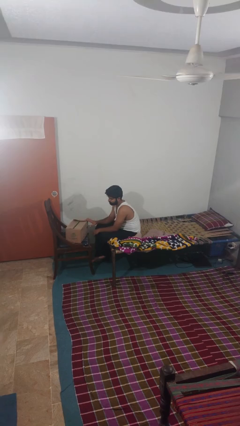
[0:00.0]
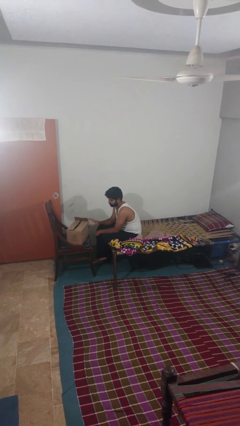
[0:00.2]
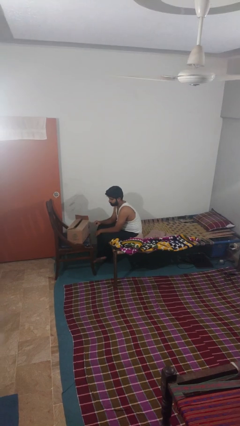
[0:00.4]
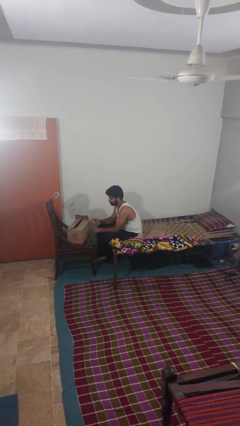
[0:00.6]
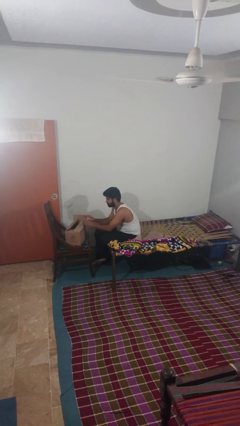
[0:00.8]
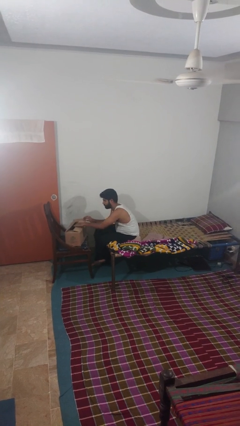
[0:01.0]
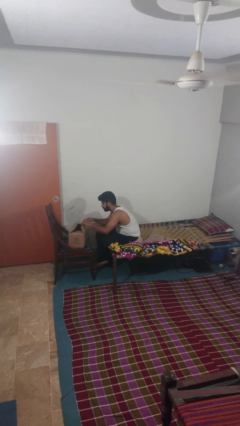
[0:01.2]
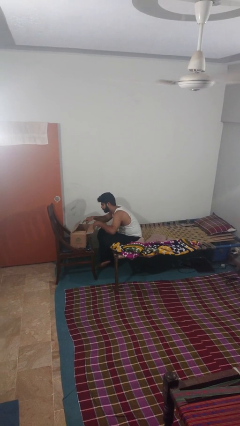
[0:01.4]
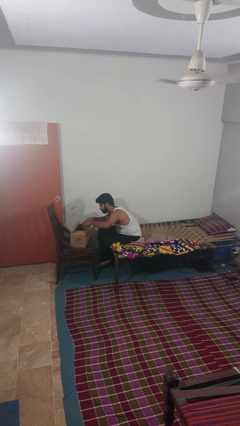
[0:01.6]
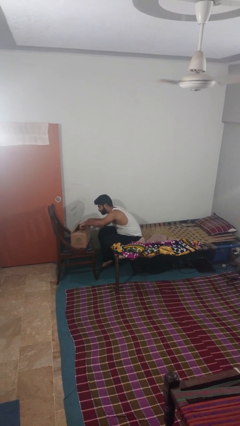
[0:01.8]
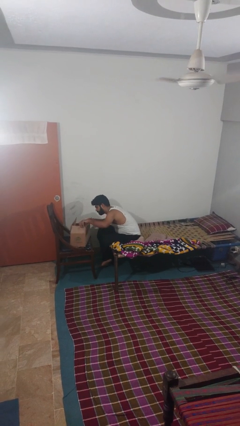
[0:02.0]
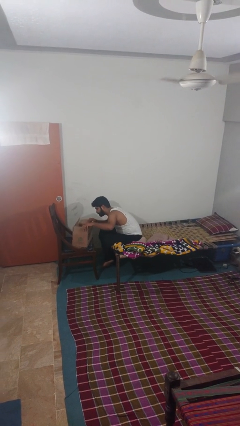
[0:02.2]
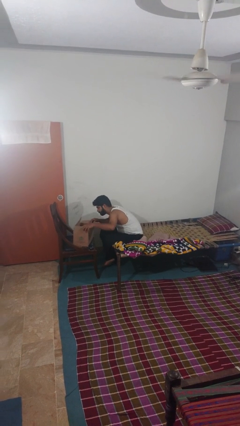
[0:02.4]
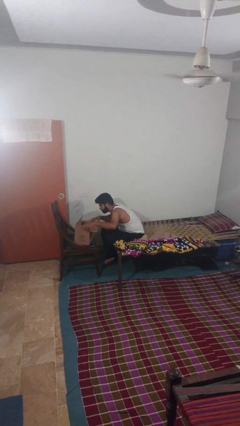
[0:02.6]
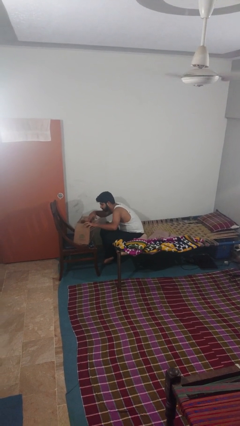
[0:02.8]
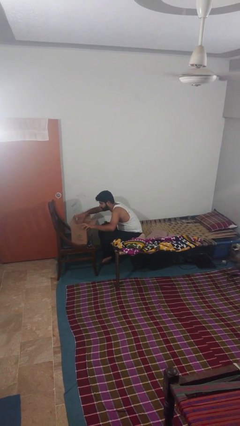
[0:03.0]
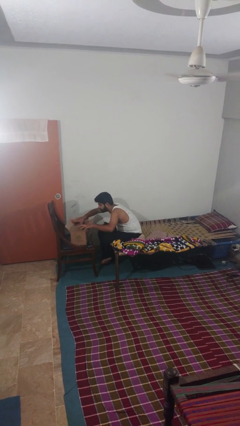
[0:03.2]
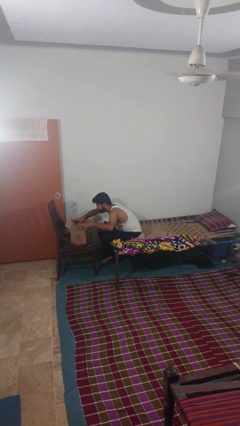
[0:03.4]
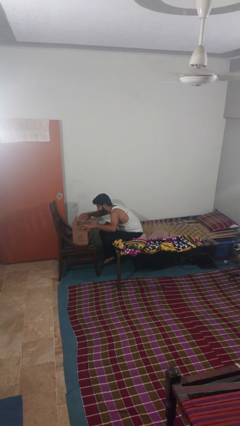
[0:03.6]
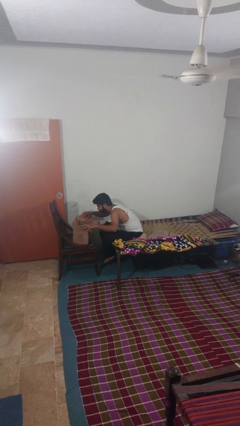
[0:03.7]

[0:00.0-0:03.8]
person opens box

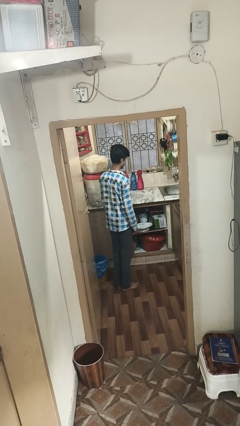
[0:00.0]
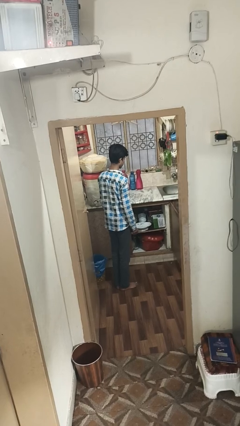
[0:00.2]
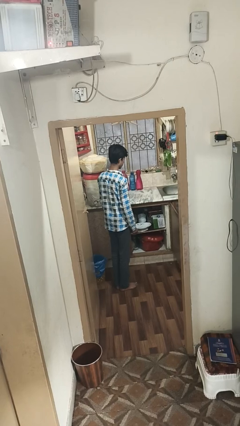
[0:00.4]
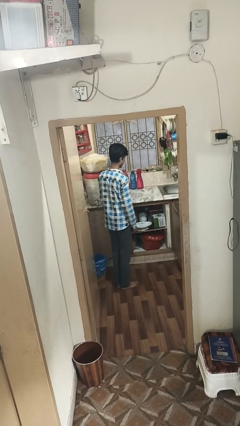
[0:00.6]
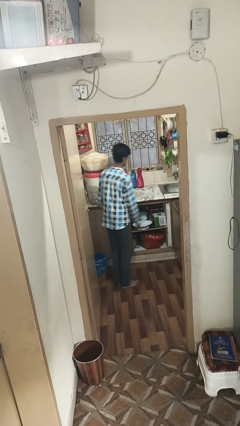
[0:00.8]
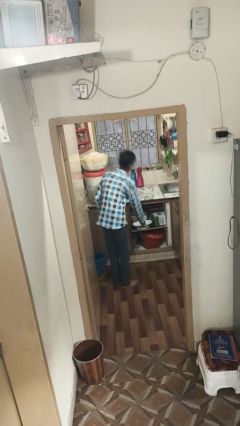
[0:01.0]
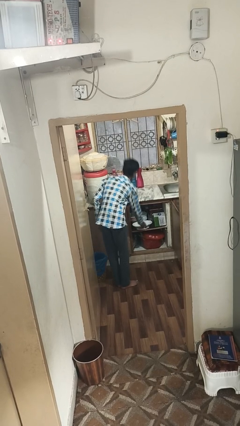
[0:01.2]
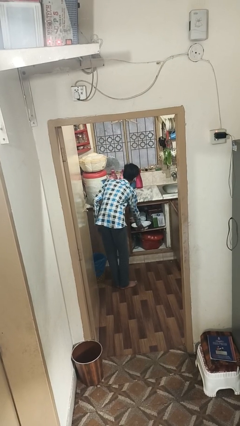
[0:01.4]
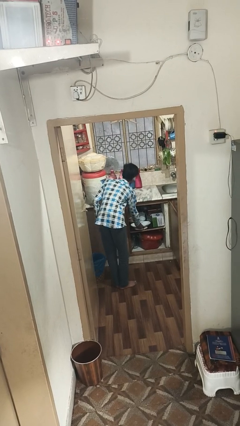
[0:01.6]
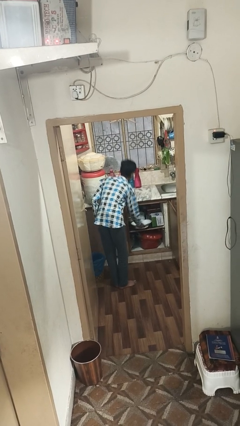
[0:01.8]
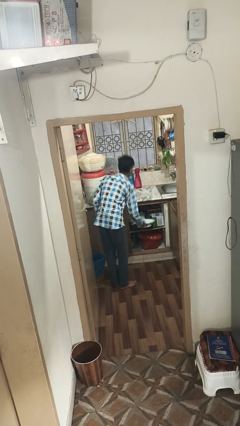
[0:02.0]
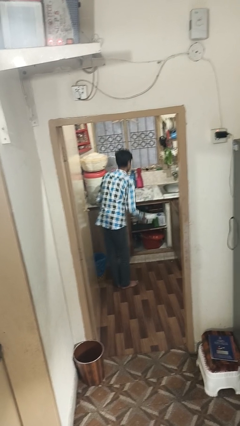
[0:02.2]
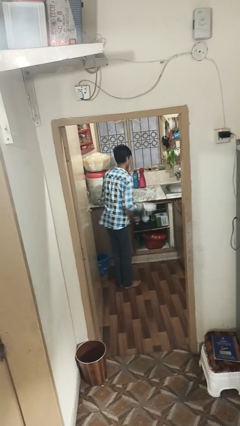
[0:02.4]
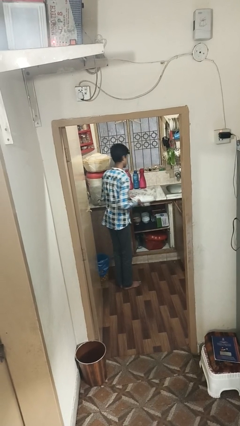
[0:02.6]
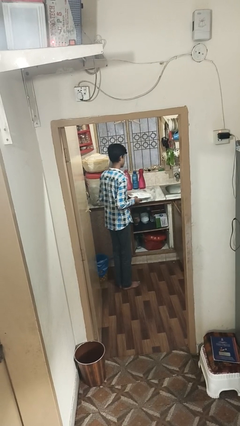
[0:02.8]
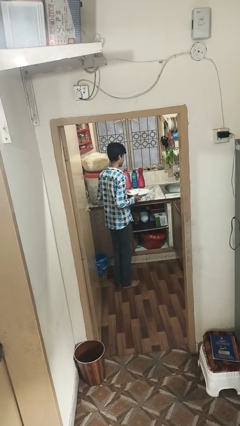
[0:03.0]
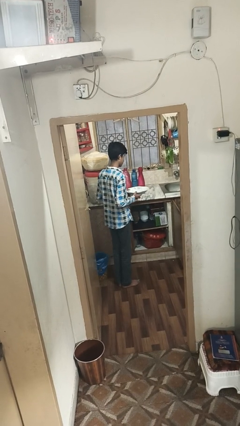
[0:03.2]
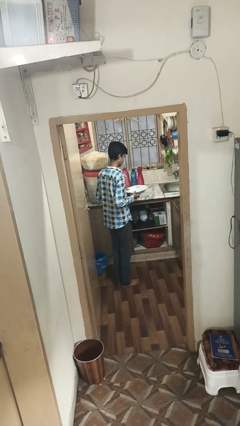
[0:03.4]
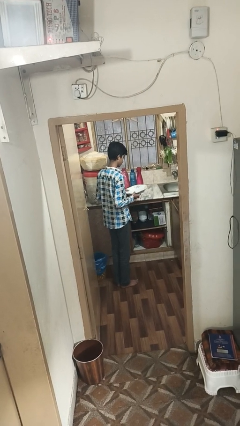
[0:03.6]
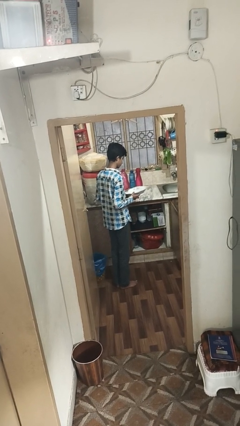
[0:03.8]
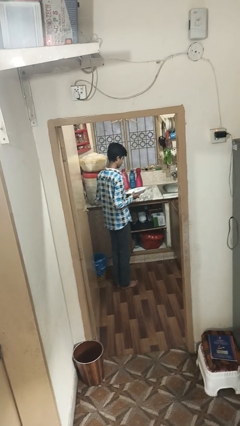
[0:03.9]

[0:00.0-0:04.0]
person picks up object from cabinet

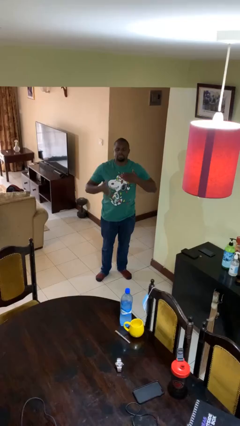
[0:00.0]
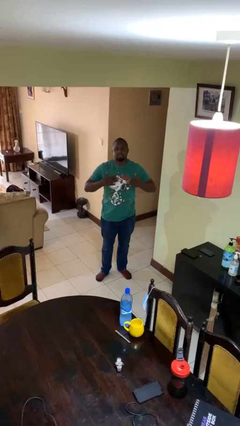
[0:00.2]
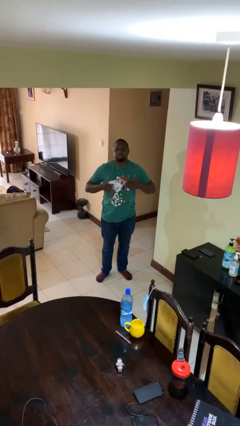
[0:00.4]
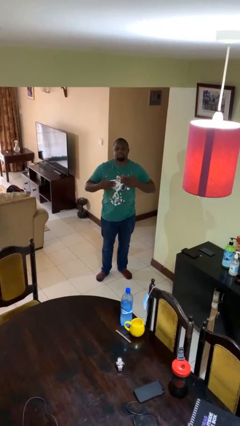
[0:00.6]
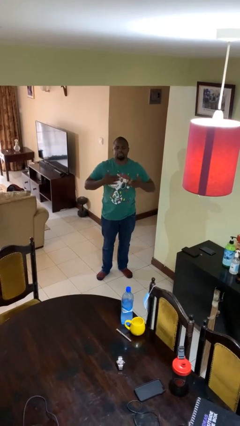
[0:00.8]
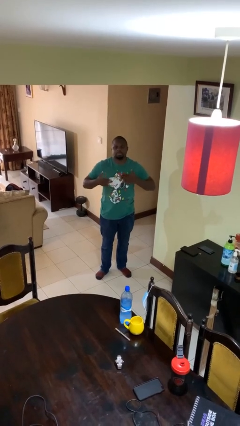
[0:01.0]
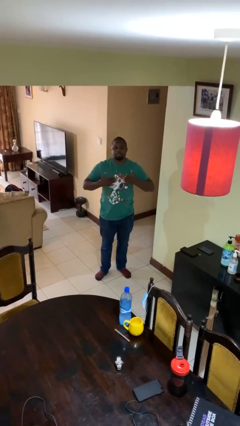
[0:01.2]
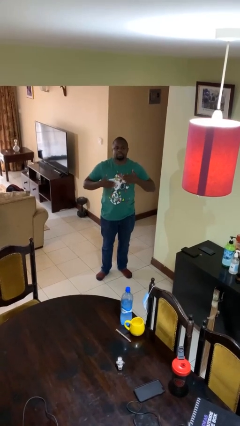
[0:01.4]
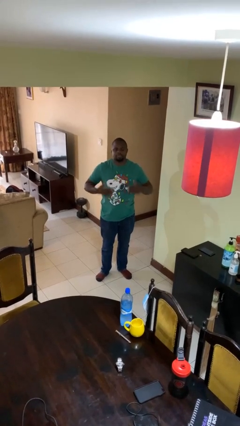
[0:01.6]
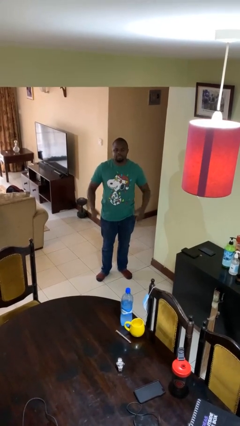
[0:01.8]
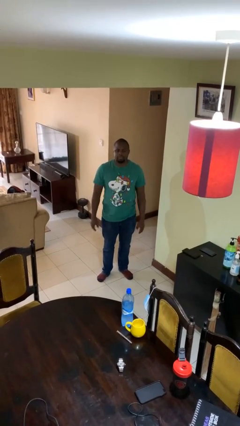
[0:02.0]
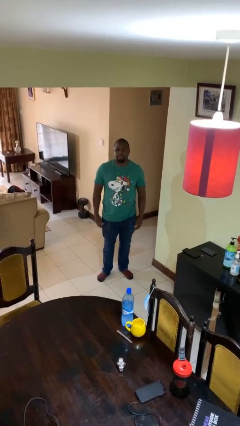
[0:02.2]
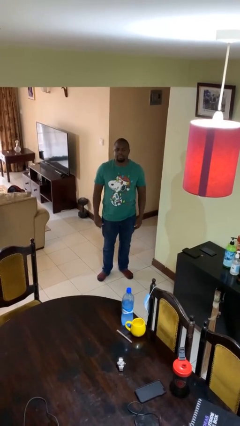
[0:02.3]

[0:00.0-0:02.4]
person drums on chest

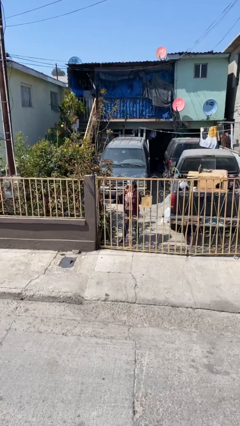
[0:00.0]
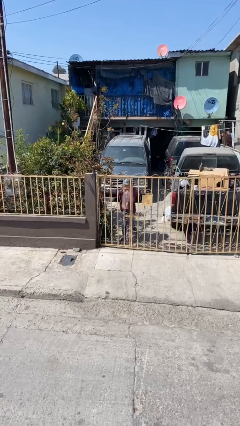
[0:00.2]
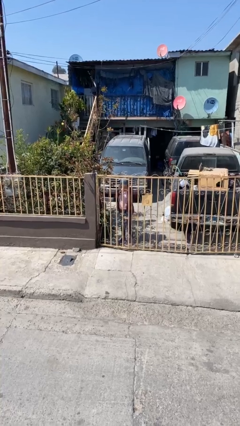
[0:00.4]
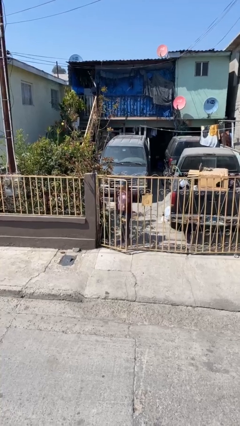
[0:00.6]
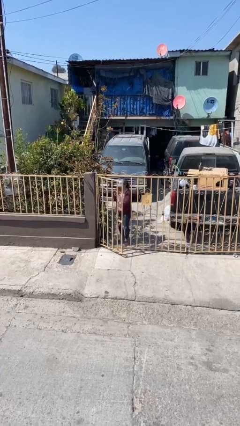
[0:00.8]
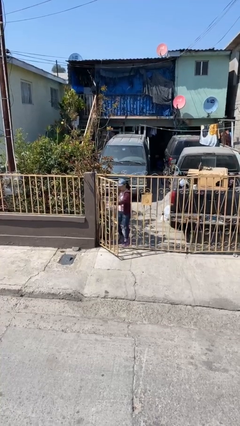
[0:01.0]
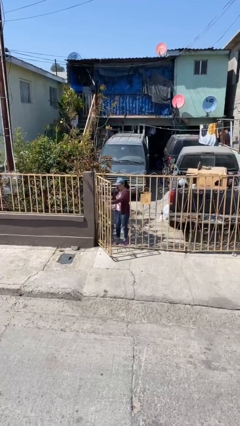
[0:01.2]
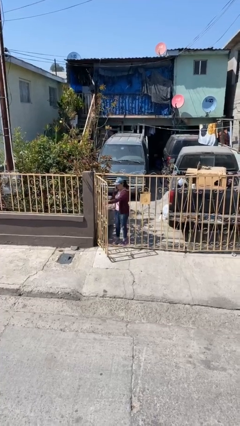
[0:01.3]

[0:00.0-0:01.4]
person opens facility door

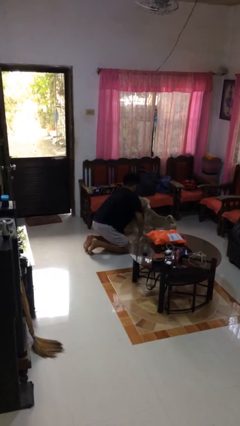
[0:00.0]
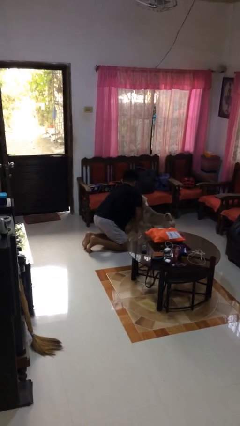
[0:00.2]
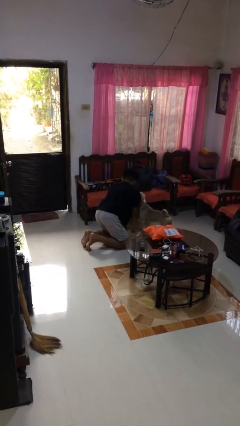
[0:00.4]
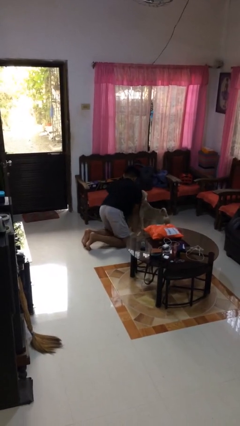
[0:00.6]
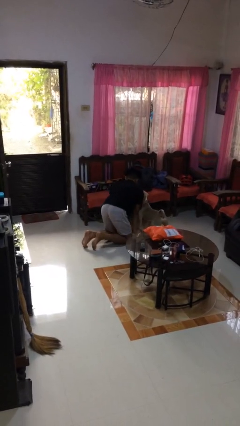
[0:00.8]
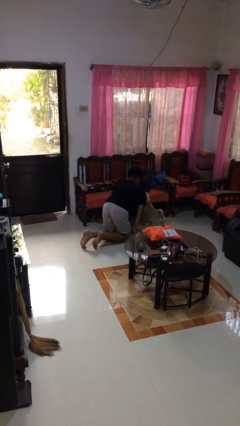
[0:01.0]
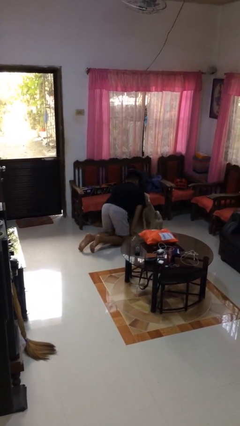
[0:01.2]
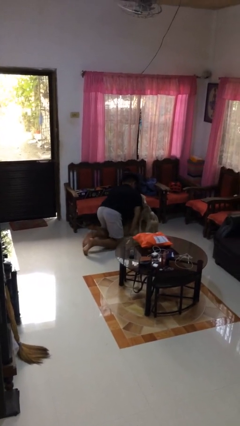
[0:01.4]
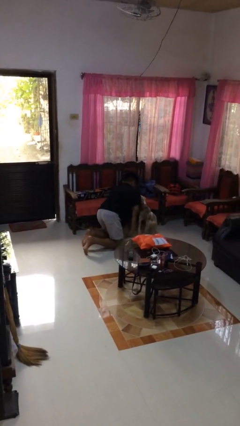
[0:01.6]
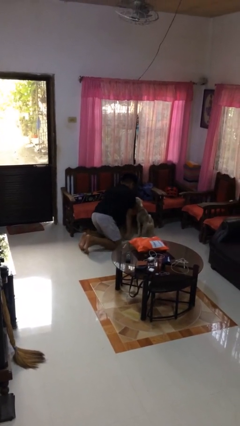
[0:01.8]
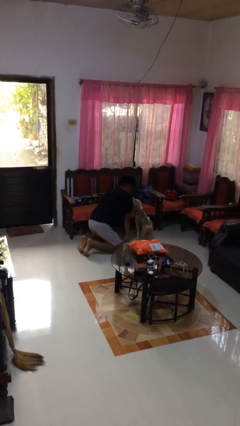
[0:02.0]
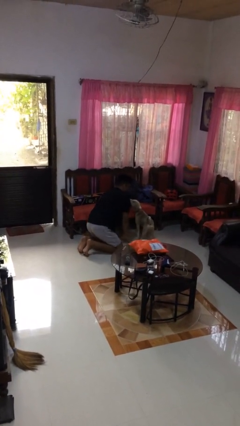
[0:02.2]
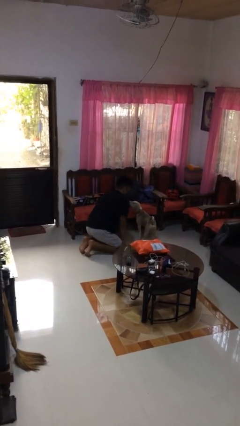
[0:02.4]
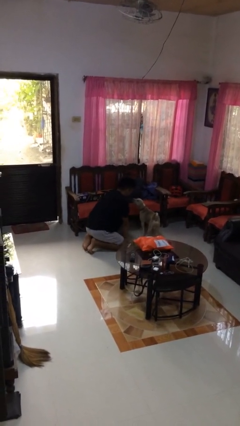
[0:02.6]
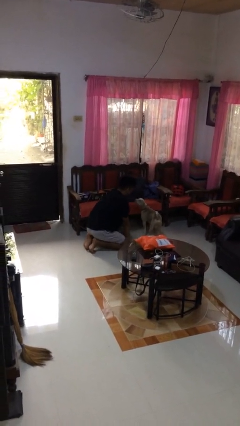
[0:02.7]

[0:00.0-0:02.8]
person crawls

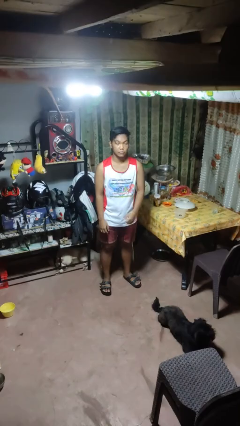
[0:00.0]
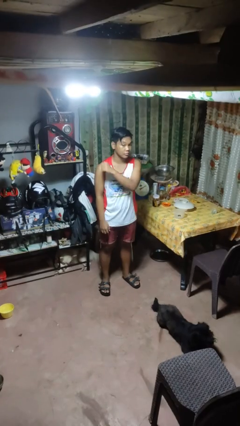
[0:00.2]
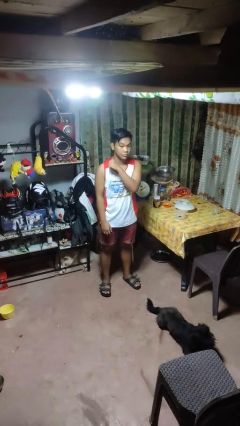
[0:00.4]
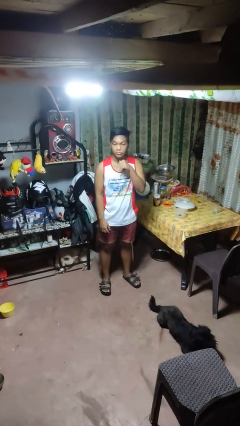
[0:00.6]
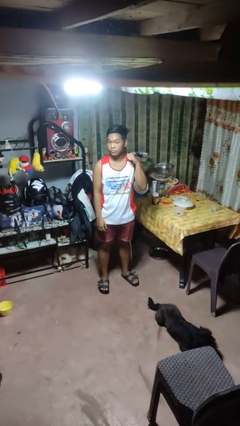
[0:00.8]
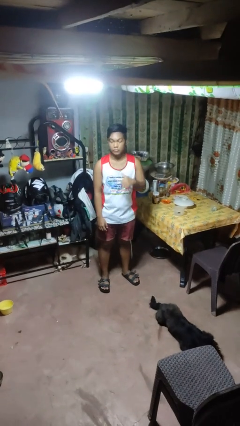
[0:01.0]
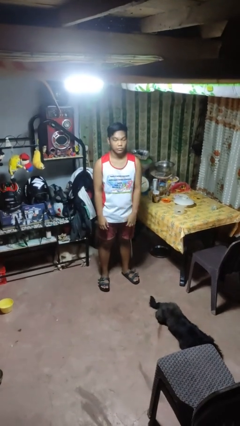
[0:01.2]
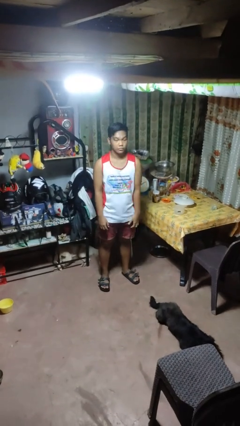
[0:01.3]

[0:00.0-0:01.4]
person gestures cut

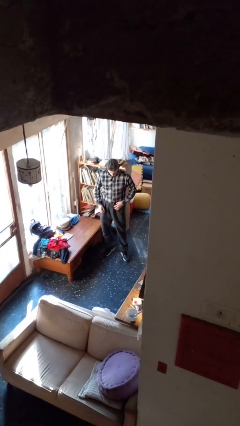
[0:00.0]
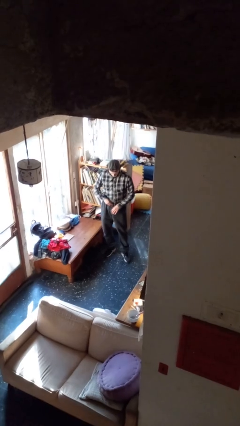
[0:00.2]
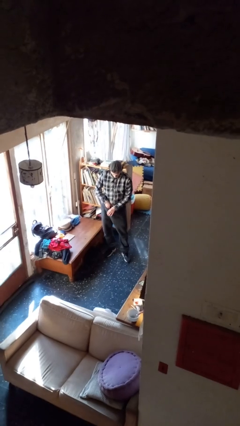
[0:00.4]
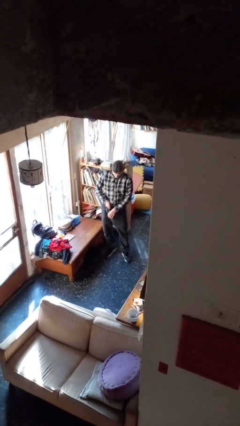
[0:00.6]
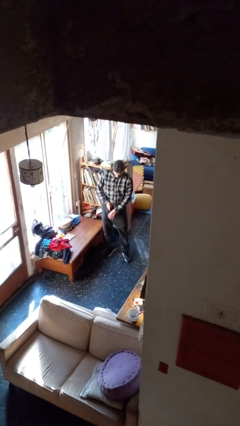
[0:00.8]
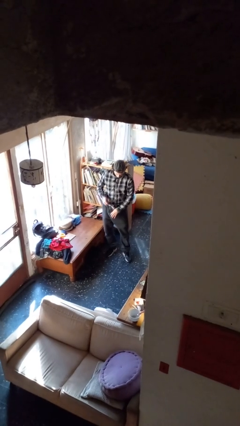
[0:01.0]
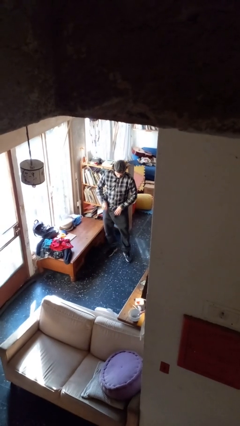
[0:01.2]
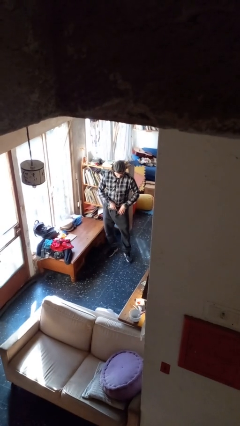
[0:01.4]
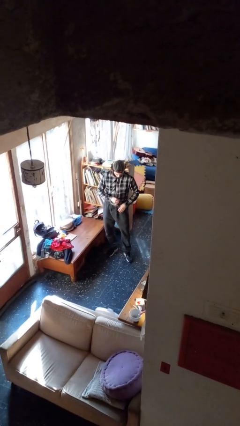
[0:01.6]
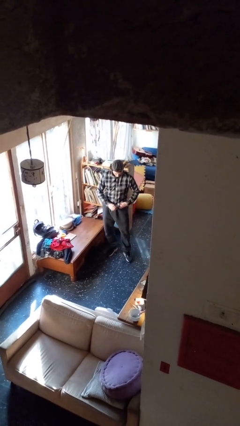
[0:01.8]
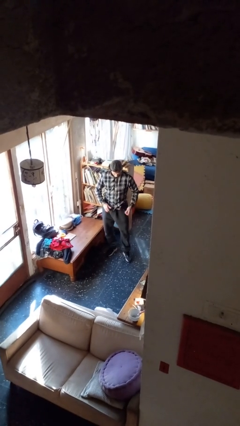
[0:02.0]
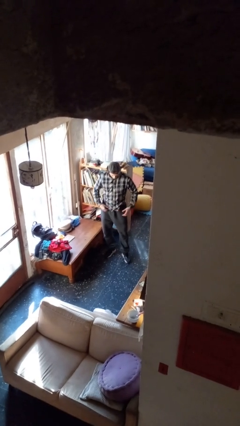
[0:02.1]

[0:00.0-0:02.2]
person untucks shirt
